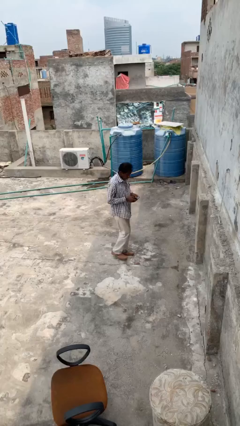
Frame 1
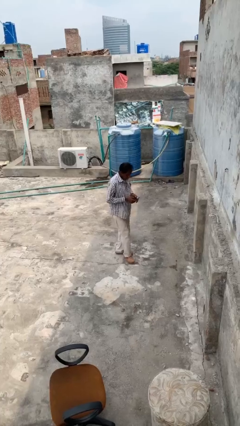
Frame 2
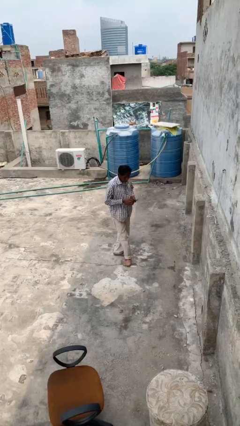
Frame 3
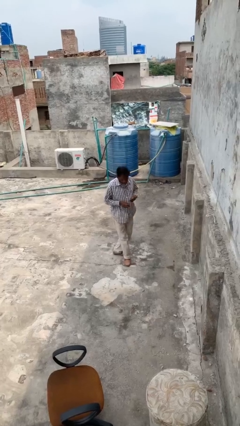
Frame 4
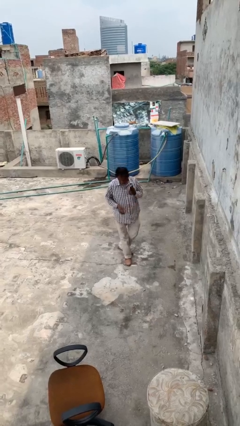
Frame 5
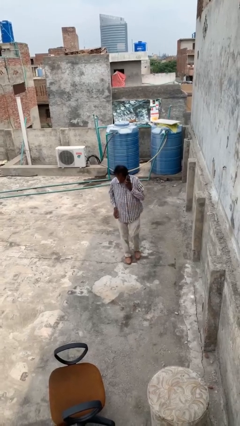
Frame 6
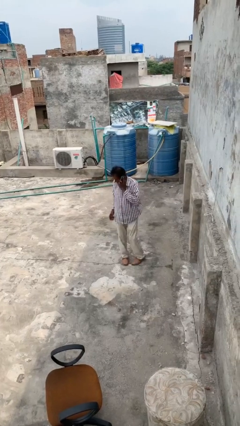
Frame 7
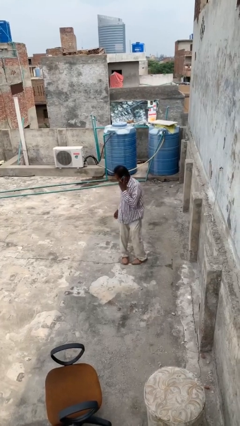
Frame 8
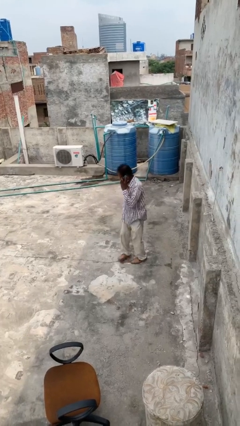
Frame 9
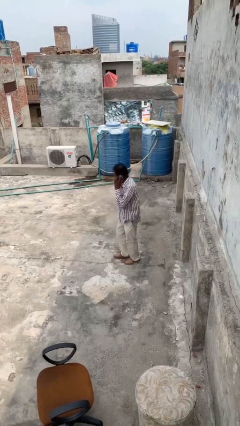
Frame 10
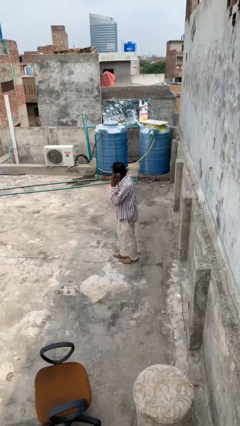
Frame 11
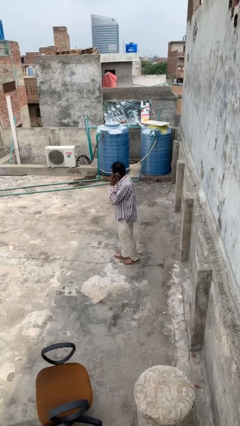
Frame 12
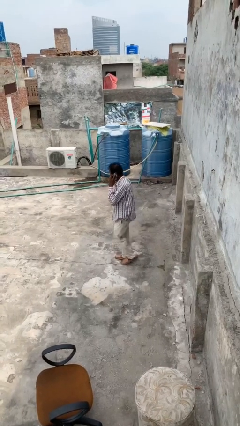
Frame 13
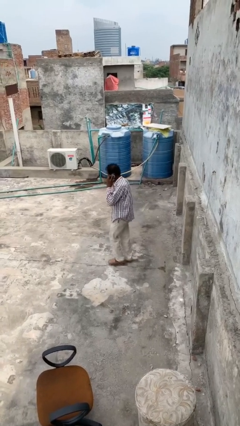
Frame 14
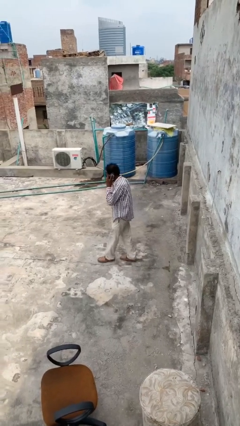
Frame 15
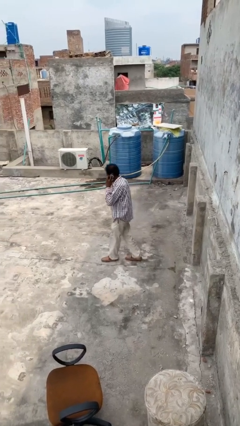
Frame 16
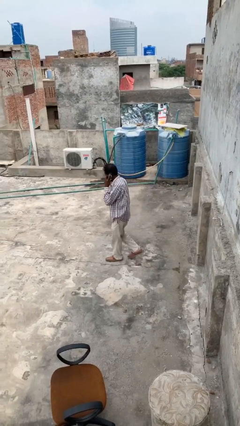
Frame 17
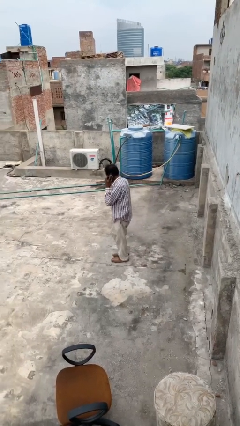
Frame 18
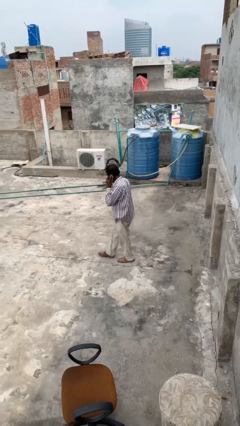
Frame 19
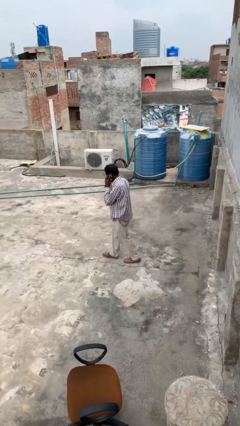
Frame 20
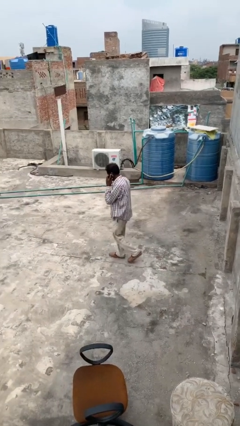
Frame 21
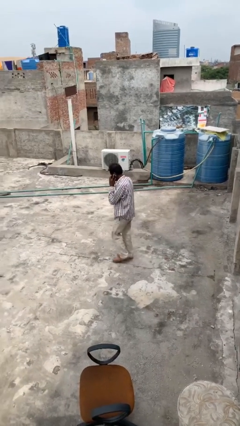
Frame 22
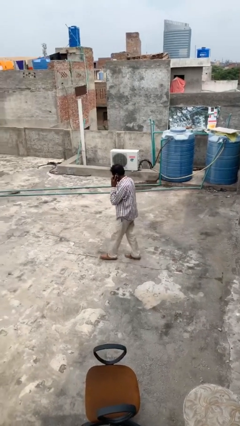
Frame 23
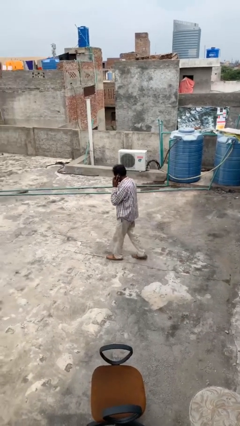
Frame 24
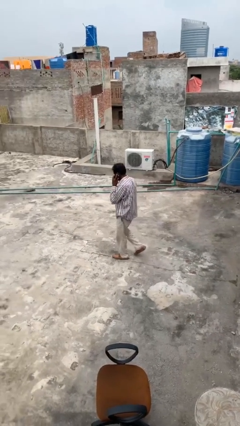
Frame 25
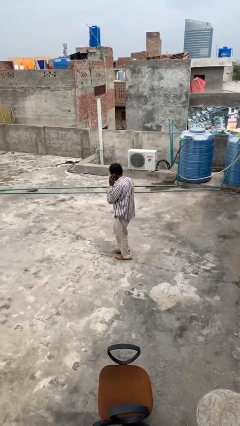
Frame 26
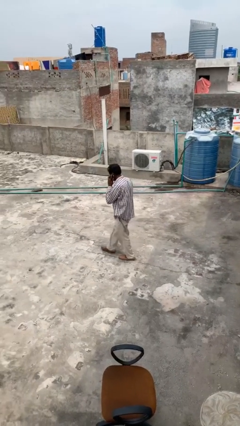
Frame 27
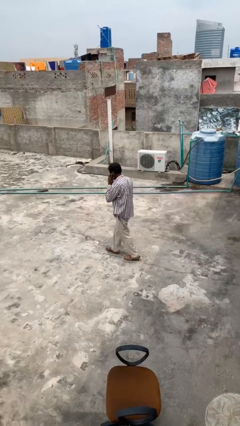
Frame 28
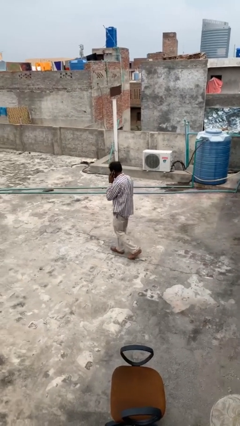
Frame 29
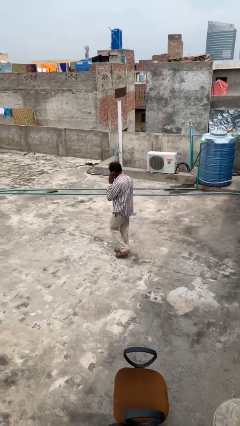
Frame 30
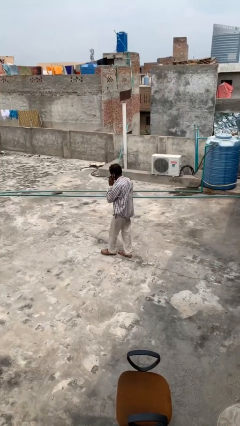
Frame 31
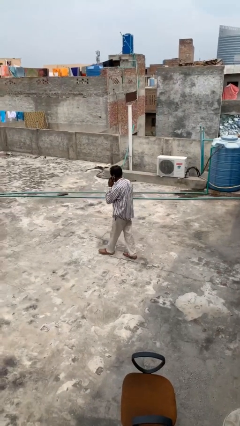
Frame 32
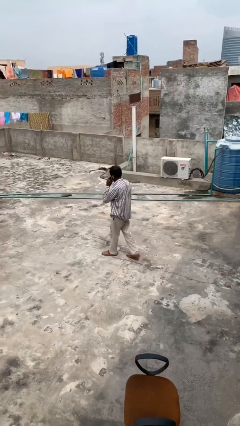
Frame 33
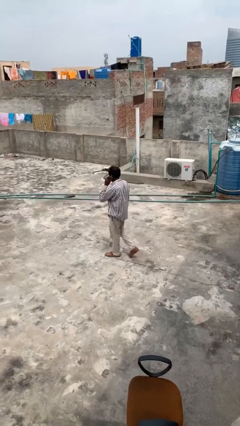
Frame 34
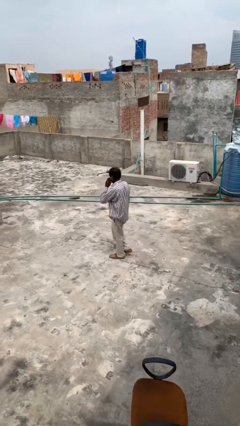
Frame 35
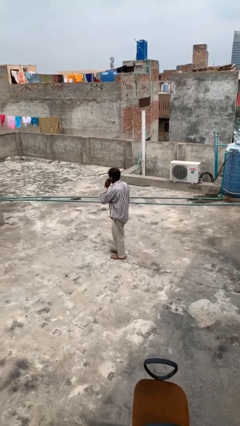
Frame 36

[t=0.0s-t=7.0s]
person talks on phone

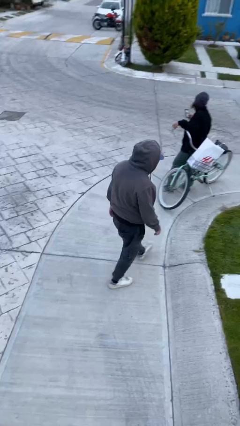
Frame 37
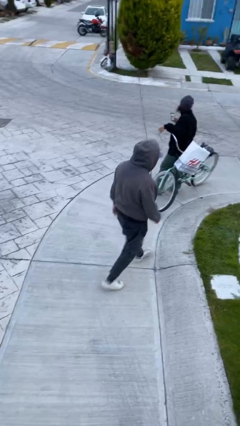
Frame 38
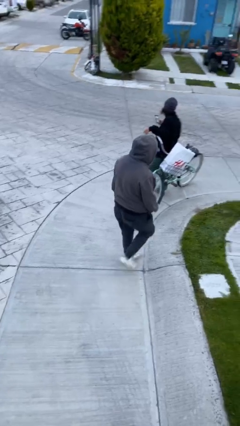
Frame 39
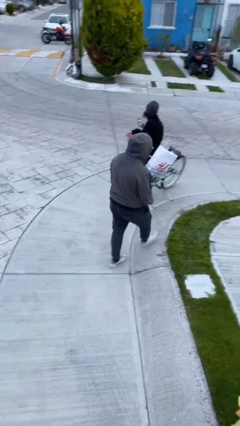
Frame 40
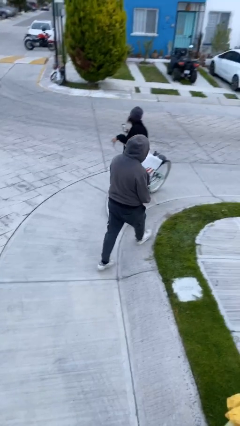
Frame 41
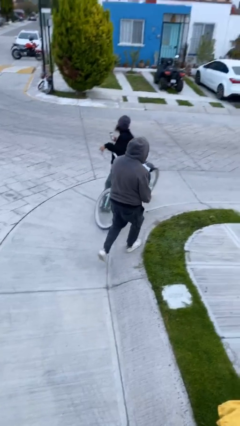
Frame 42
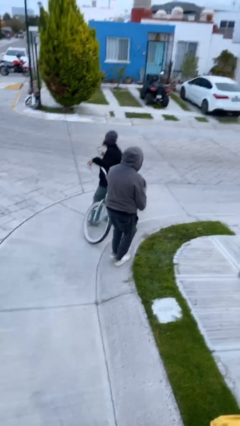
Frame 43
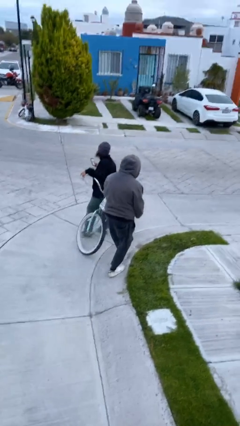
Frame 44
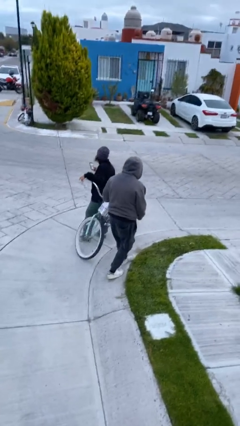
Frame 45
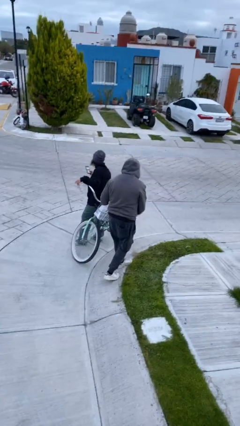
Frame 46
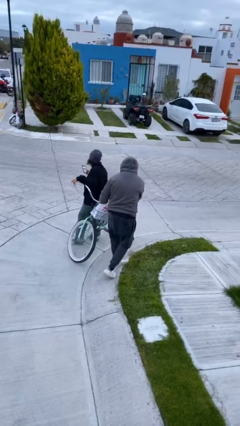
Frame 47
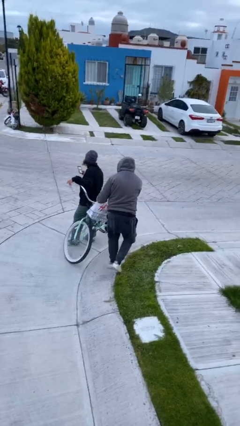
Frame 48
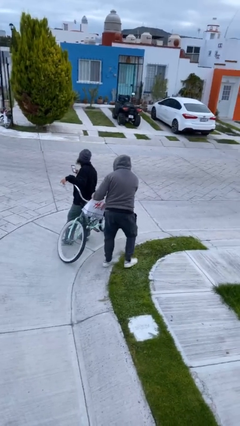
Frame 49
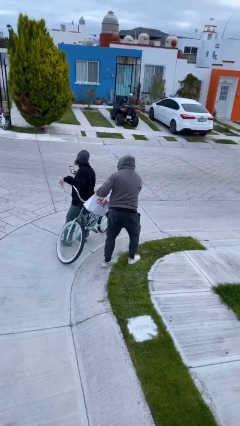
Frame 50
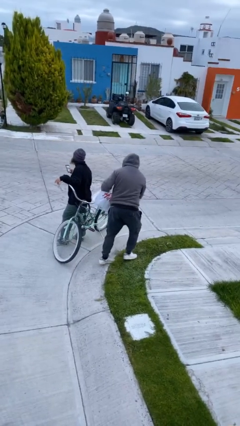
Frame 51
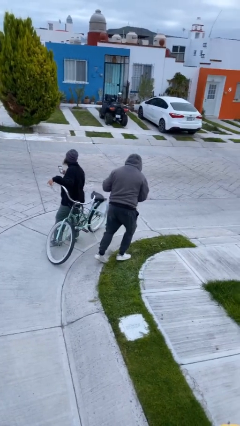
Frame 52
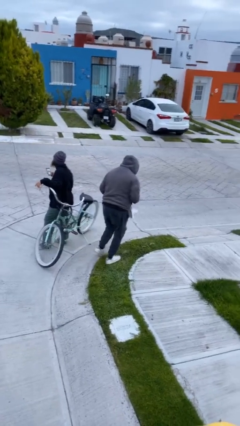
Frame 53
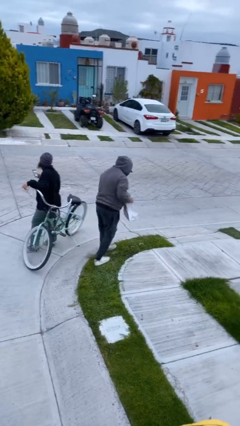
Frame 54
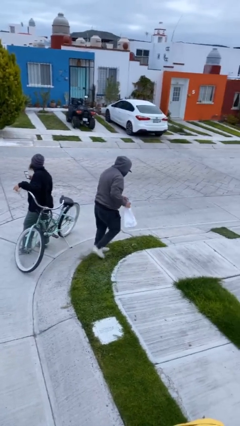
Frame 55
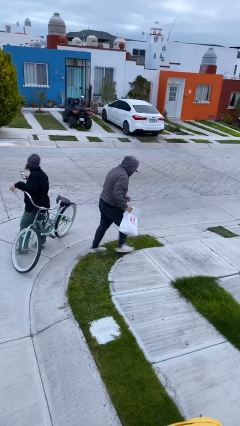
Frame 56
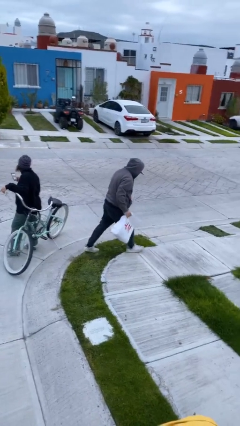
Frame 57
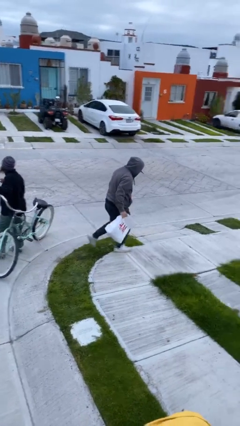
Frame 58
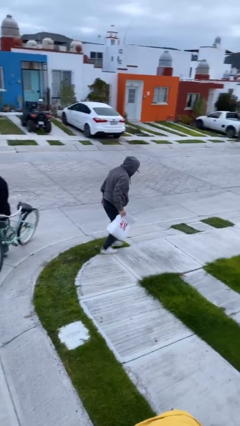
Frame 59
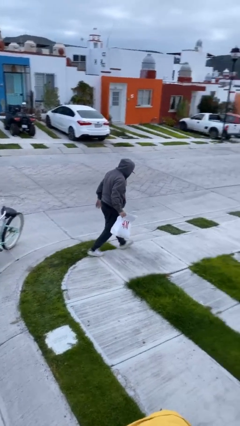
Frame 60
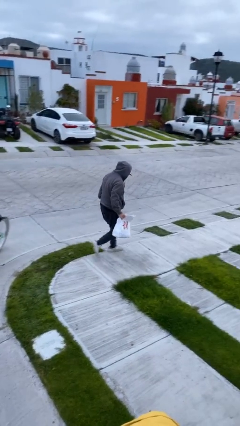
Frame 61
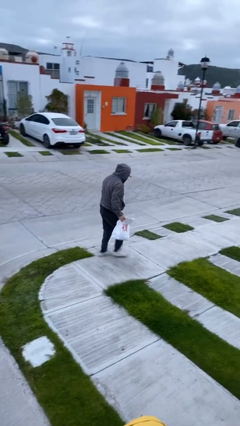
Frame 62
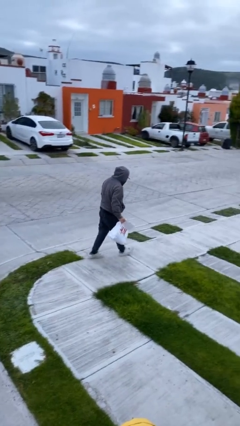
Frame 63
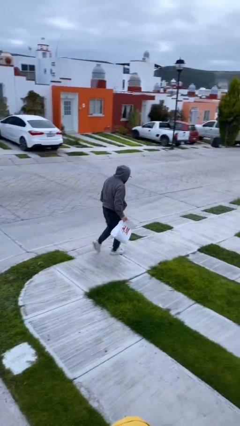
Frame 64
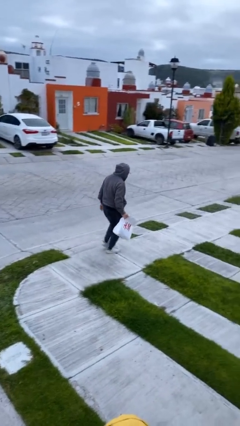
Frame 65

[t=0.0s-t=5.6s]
person steals object from person

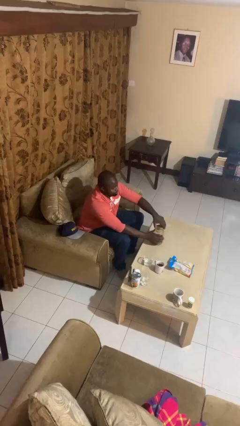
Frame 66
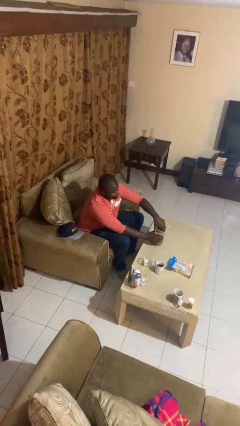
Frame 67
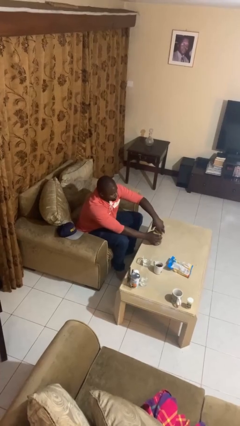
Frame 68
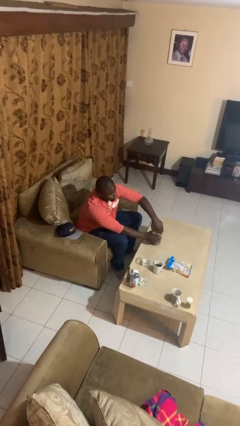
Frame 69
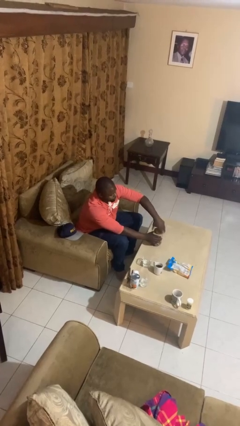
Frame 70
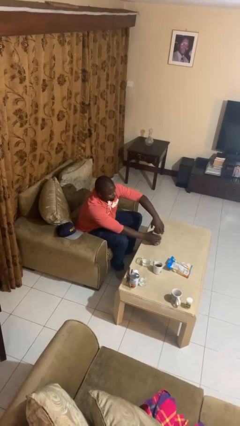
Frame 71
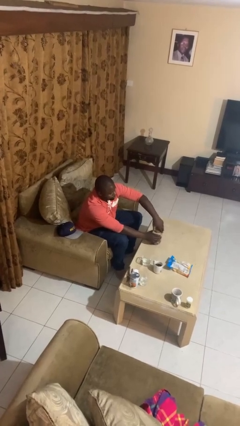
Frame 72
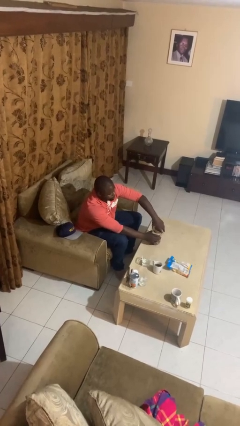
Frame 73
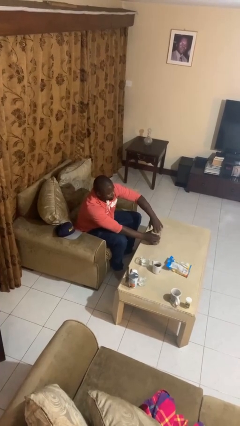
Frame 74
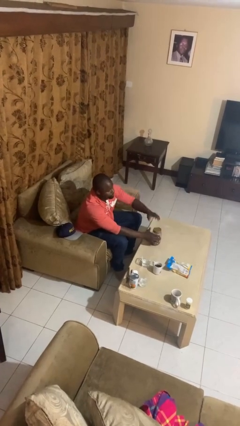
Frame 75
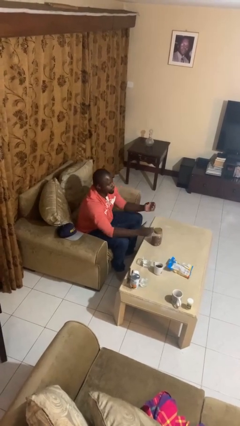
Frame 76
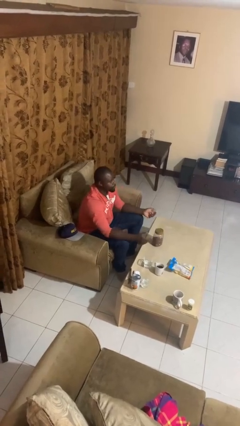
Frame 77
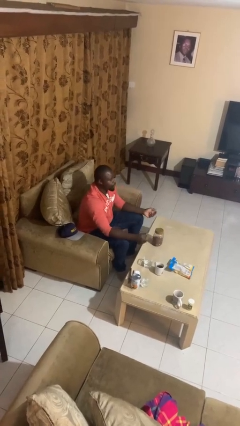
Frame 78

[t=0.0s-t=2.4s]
person closes jar

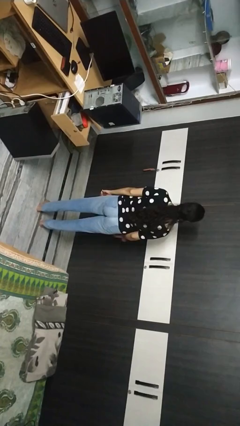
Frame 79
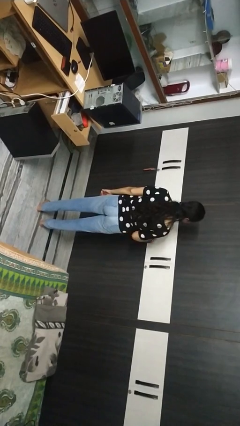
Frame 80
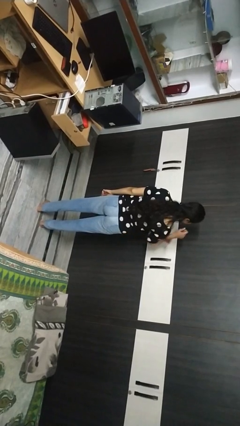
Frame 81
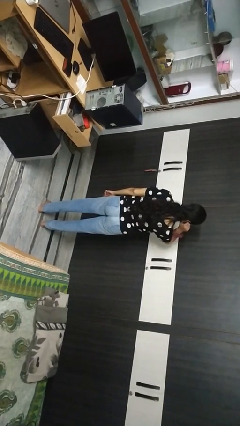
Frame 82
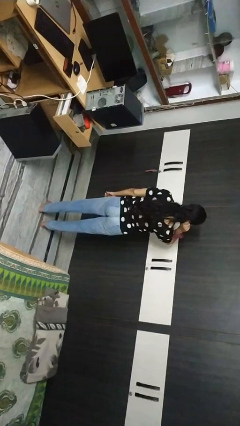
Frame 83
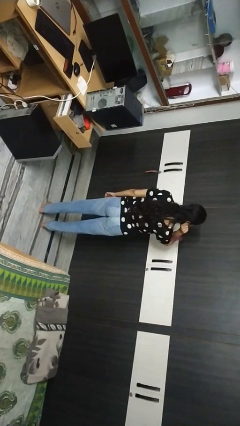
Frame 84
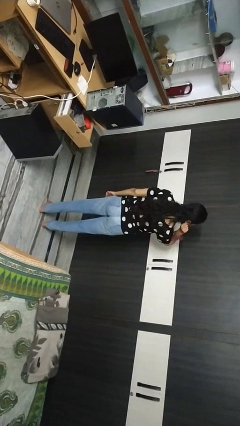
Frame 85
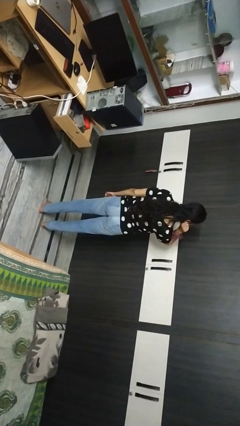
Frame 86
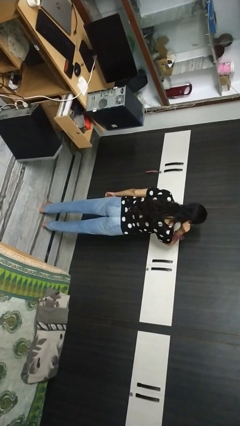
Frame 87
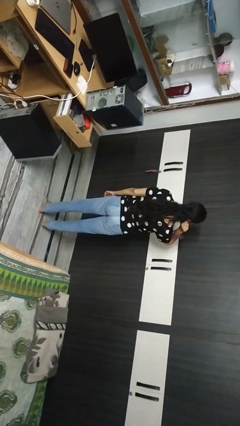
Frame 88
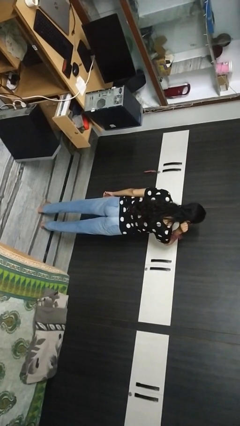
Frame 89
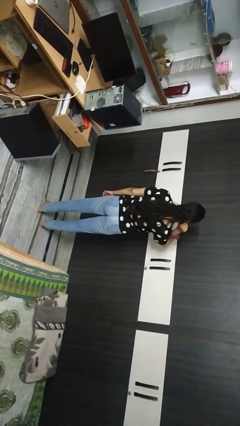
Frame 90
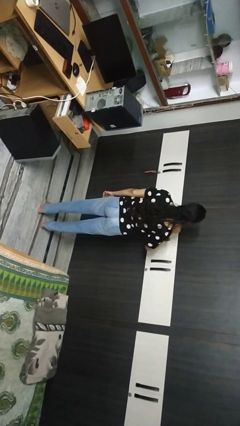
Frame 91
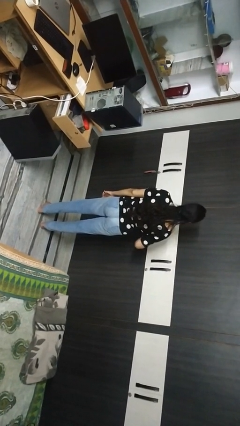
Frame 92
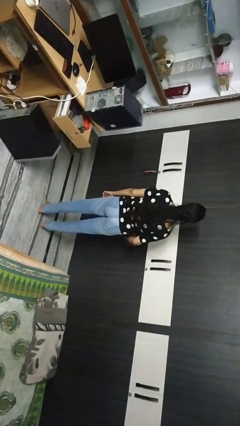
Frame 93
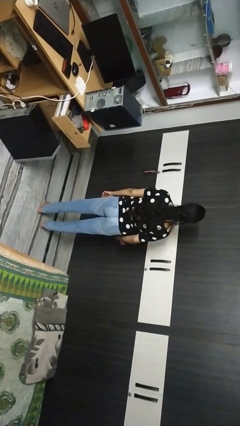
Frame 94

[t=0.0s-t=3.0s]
person touches earlobe
